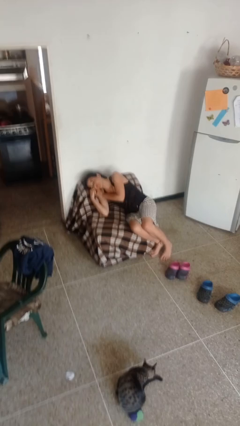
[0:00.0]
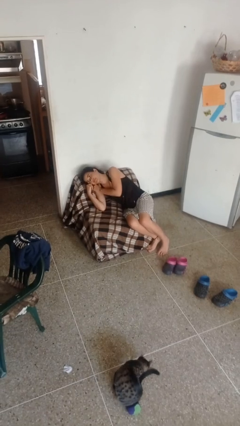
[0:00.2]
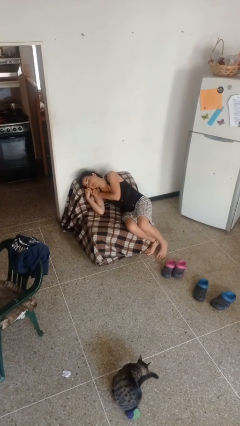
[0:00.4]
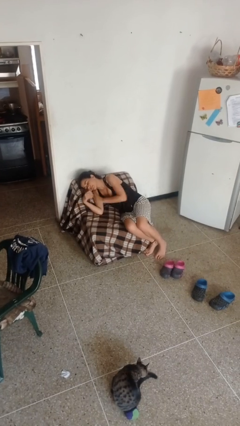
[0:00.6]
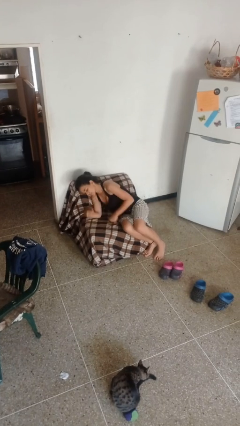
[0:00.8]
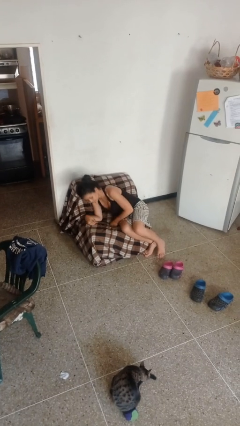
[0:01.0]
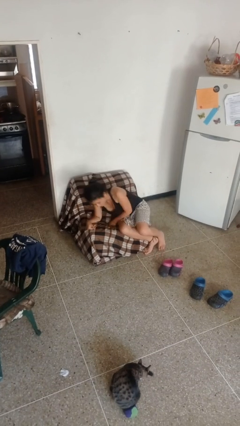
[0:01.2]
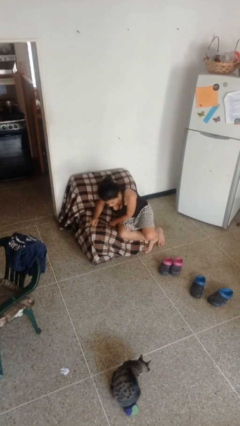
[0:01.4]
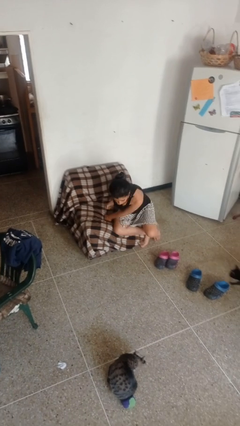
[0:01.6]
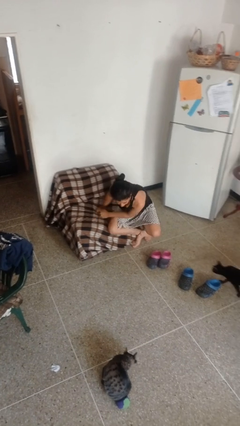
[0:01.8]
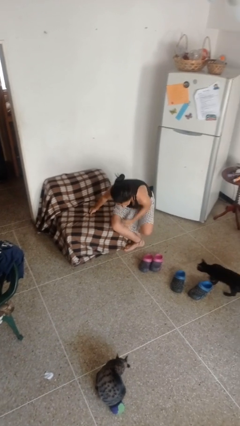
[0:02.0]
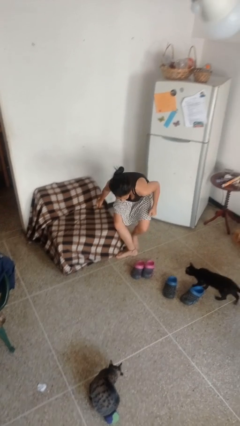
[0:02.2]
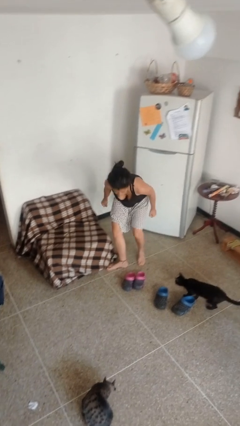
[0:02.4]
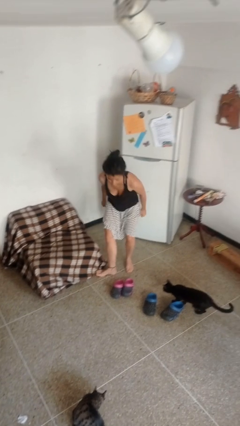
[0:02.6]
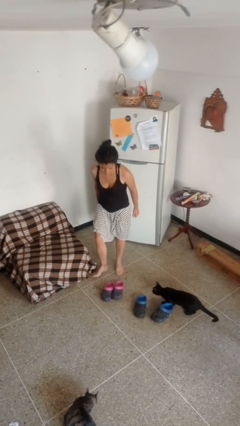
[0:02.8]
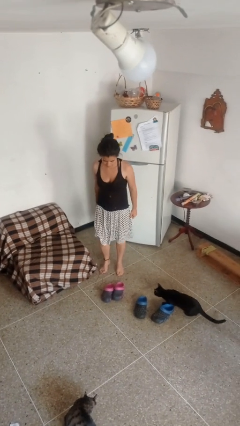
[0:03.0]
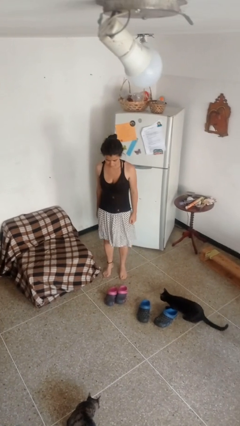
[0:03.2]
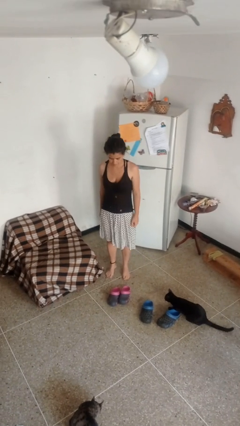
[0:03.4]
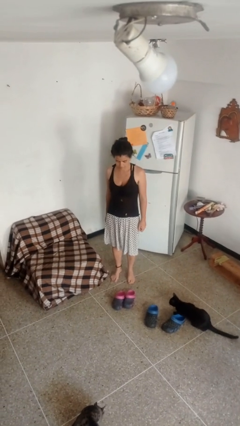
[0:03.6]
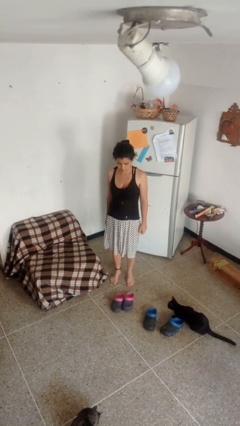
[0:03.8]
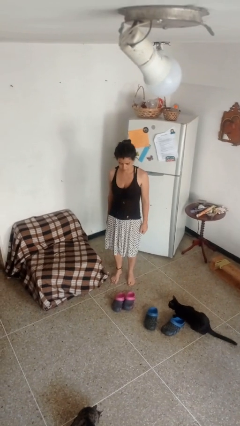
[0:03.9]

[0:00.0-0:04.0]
person stands up

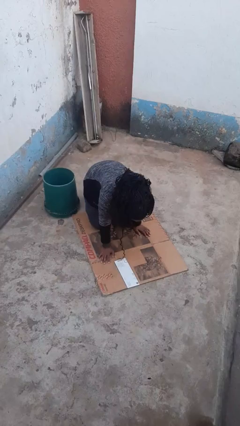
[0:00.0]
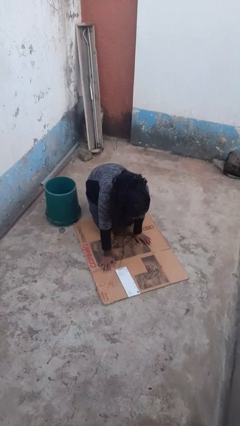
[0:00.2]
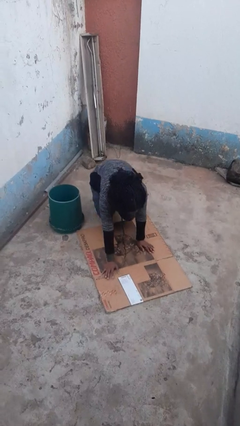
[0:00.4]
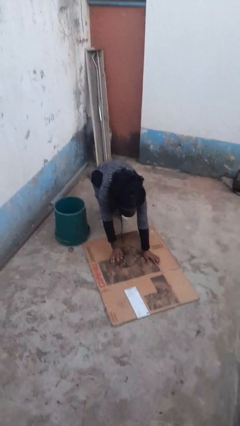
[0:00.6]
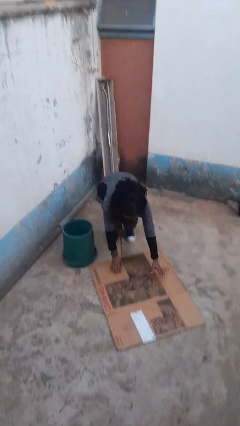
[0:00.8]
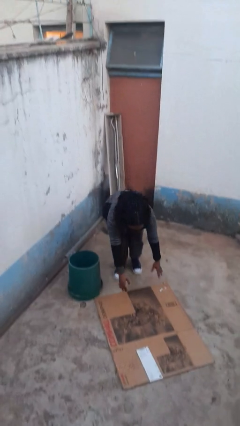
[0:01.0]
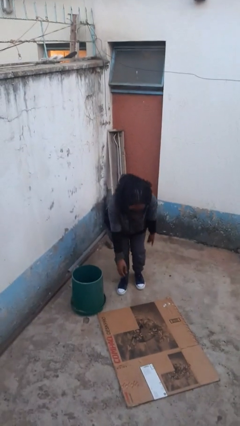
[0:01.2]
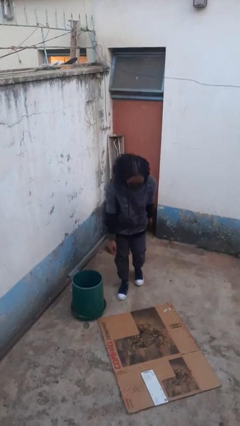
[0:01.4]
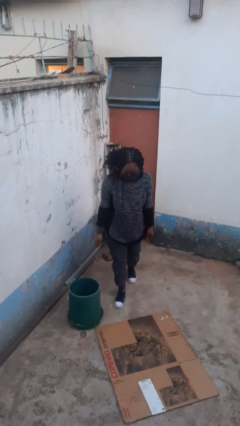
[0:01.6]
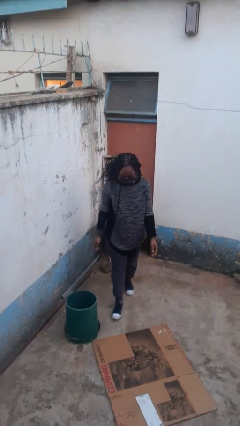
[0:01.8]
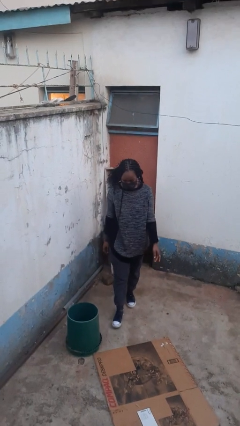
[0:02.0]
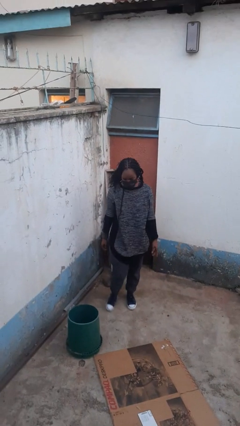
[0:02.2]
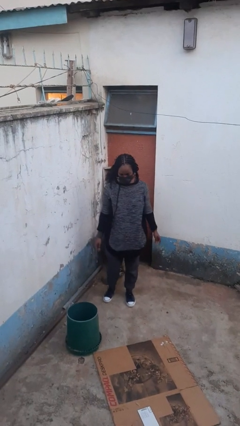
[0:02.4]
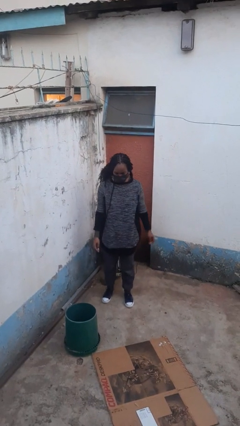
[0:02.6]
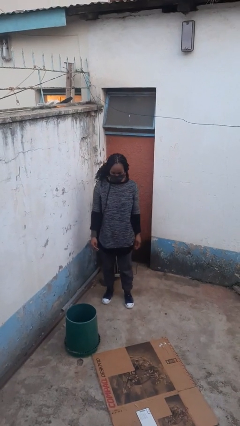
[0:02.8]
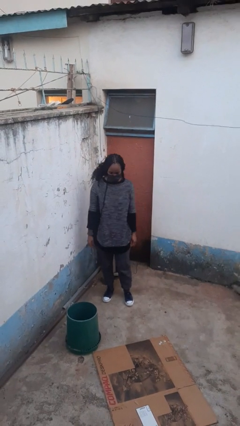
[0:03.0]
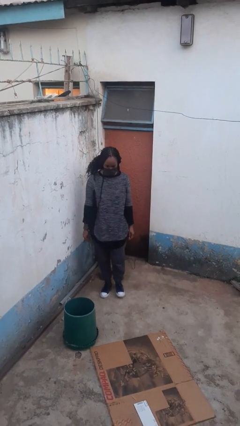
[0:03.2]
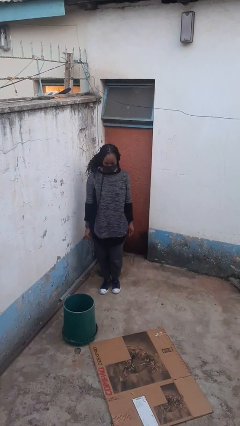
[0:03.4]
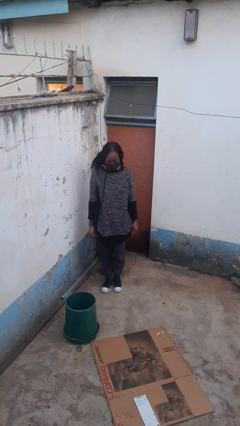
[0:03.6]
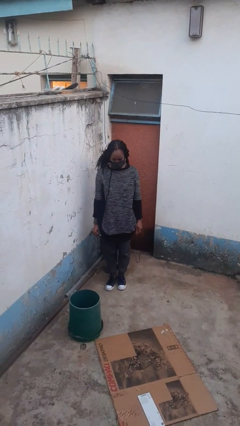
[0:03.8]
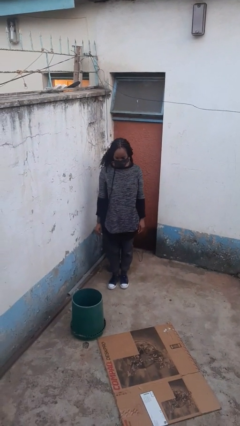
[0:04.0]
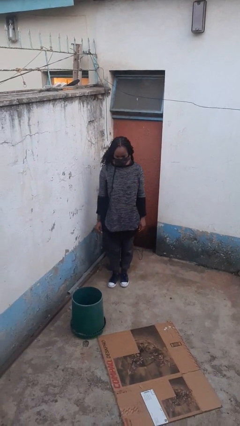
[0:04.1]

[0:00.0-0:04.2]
person stands up from floor

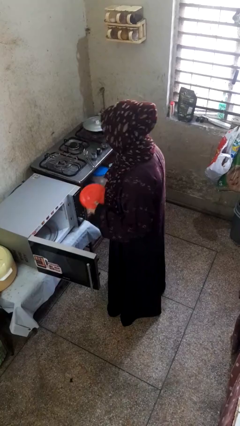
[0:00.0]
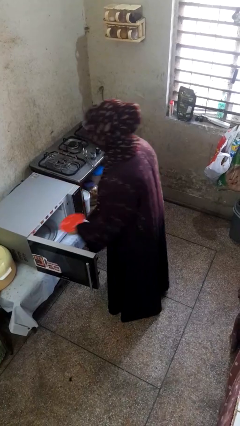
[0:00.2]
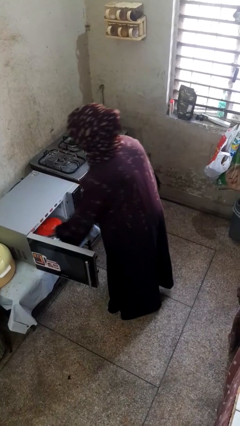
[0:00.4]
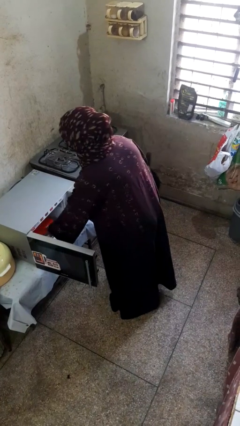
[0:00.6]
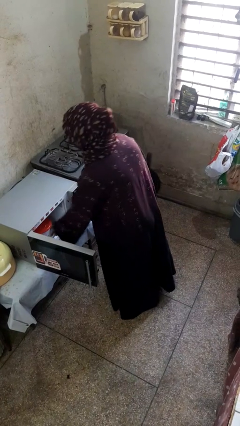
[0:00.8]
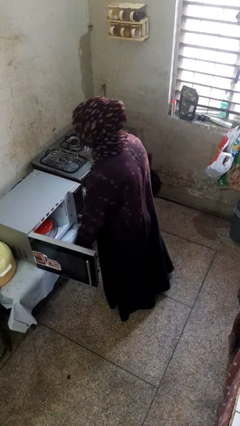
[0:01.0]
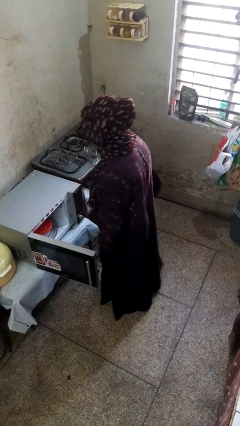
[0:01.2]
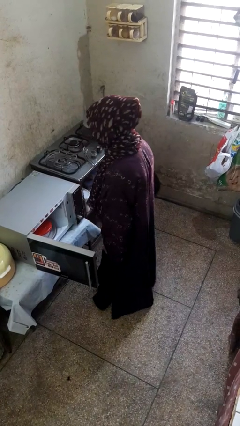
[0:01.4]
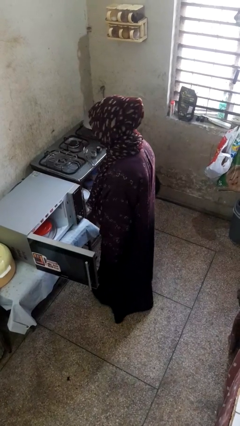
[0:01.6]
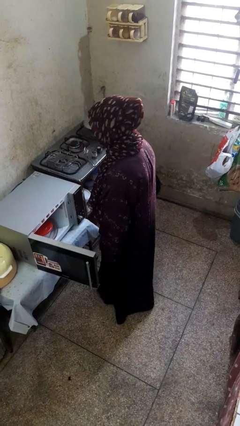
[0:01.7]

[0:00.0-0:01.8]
person puts object into microwave

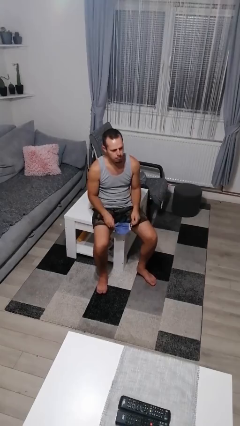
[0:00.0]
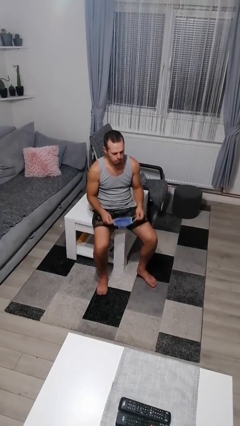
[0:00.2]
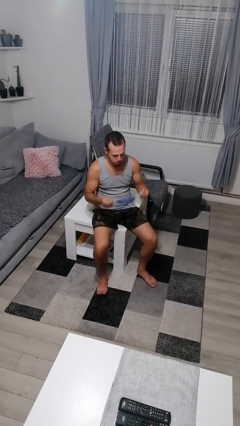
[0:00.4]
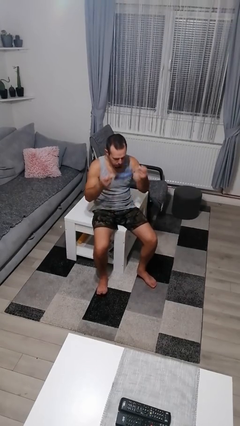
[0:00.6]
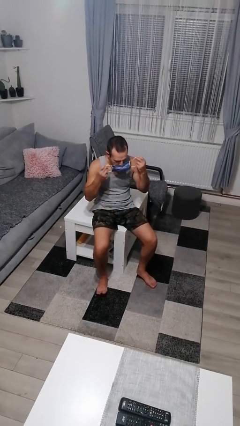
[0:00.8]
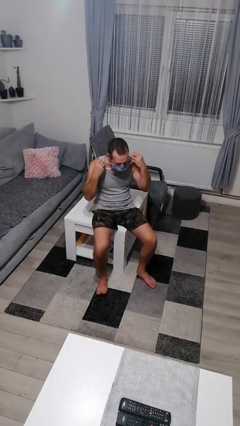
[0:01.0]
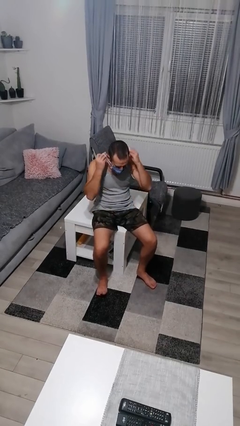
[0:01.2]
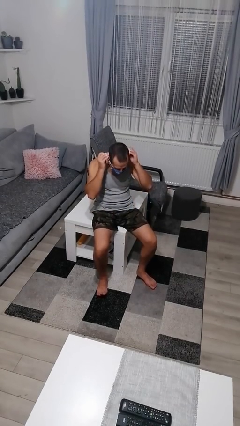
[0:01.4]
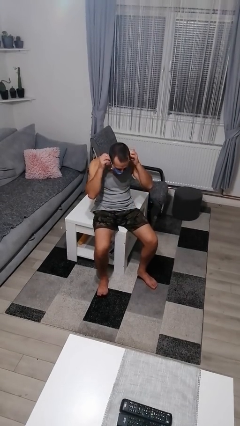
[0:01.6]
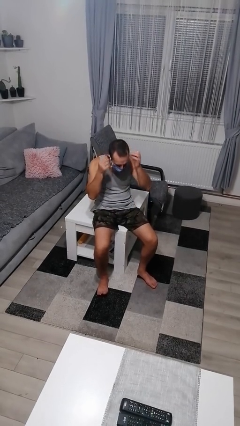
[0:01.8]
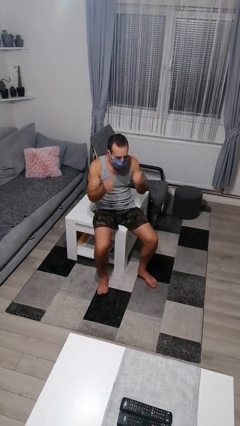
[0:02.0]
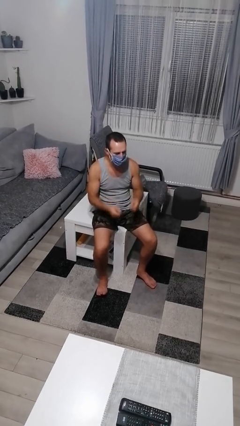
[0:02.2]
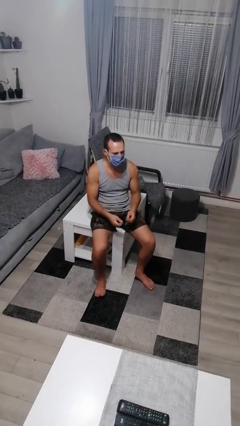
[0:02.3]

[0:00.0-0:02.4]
person puts on facemask

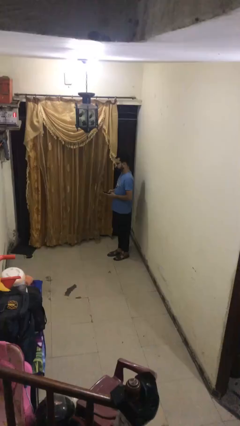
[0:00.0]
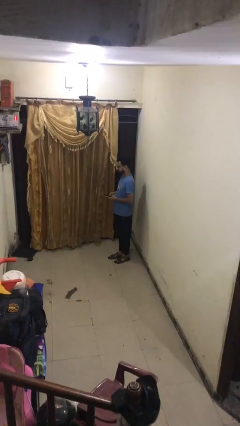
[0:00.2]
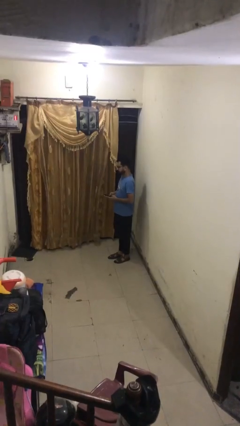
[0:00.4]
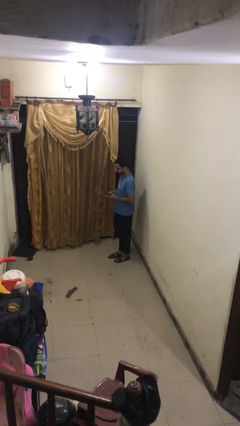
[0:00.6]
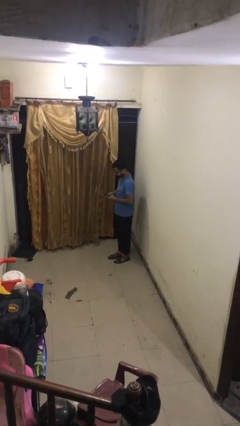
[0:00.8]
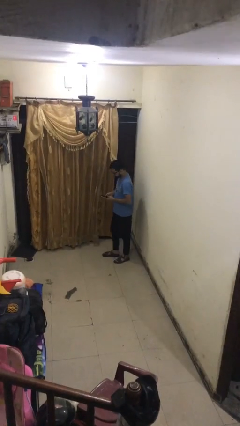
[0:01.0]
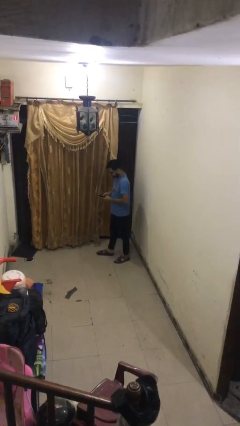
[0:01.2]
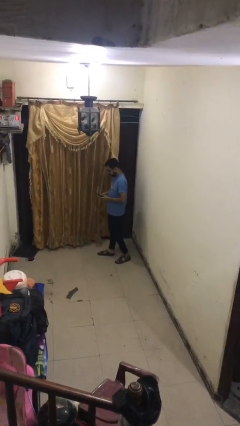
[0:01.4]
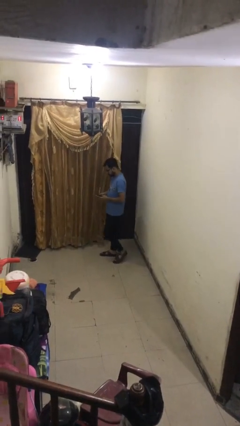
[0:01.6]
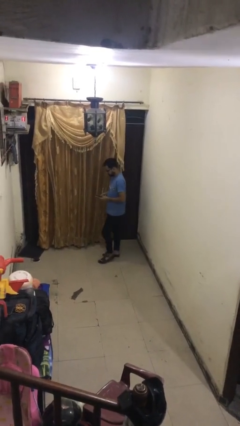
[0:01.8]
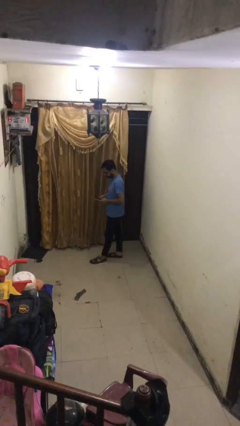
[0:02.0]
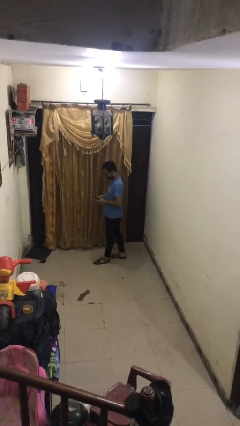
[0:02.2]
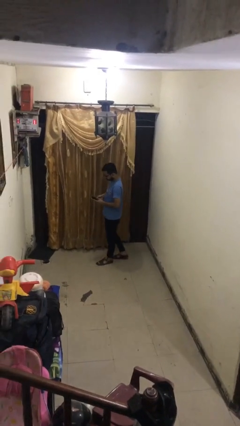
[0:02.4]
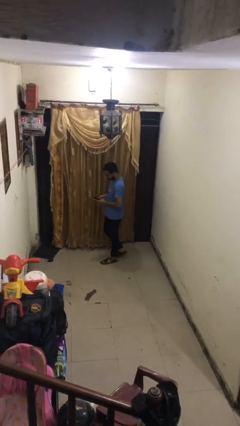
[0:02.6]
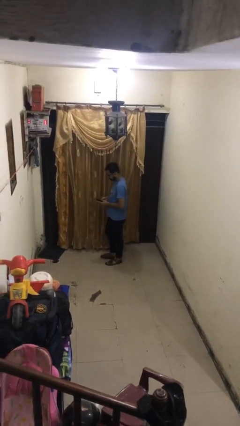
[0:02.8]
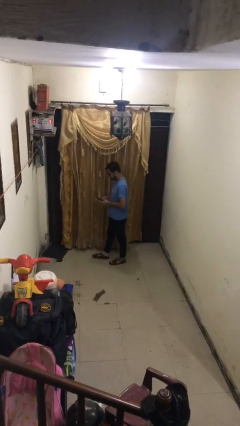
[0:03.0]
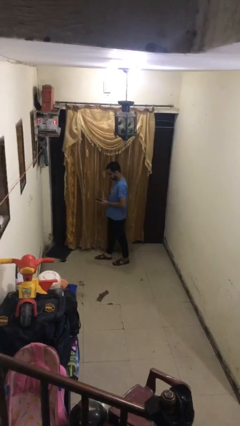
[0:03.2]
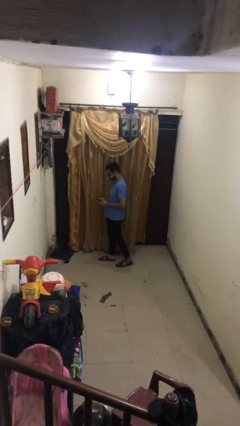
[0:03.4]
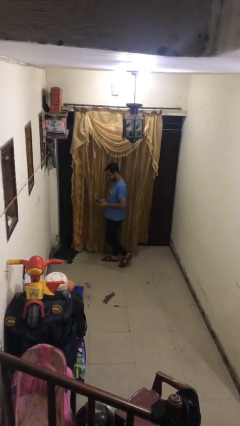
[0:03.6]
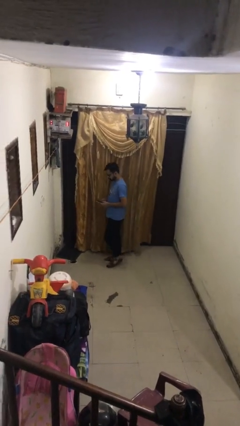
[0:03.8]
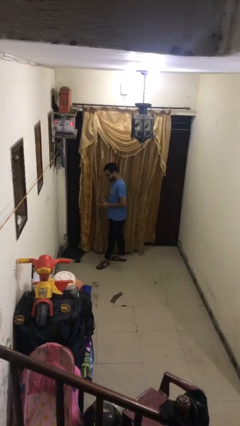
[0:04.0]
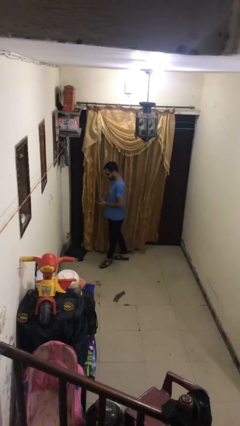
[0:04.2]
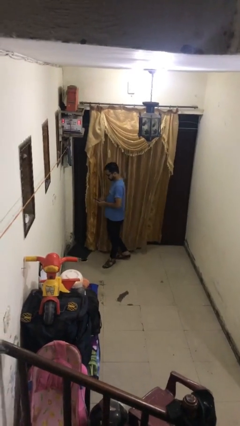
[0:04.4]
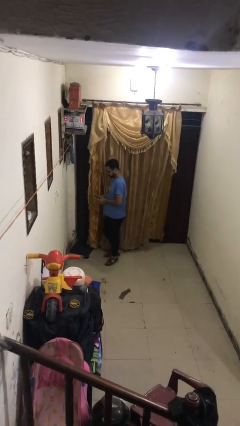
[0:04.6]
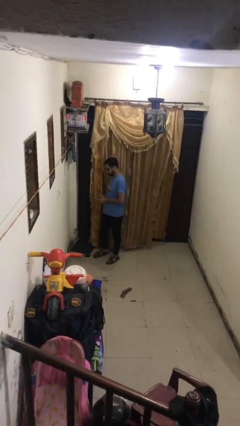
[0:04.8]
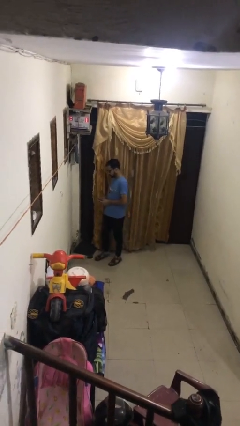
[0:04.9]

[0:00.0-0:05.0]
person texts on phone

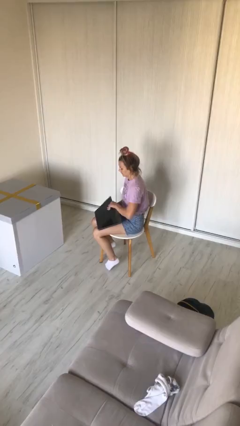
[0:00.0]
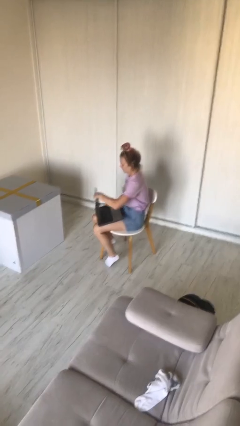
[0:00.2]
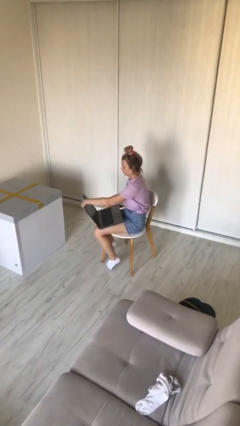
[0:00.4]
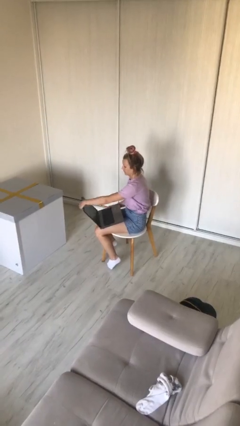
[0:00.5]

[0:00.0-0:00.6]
person opens laptop
